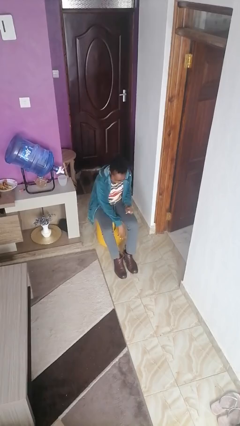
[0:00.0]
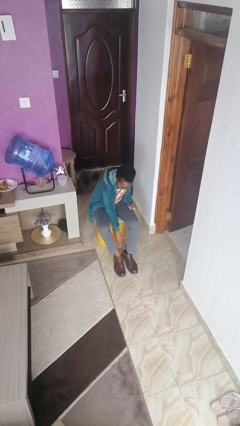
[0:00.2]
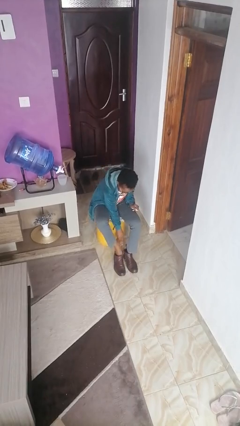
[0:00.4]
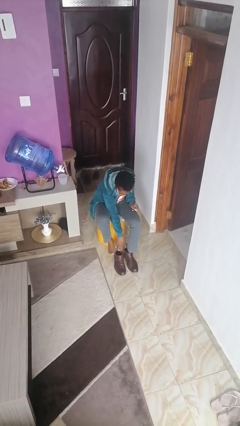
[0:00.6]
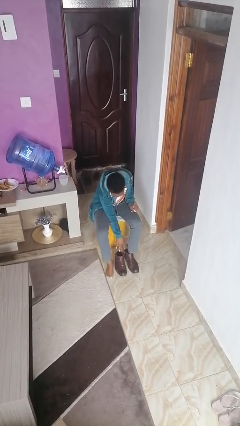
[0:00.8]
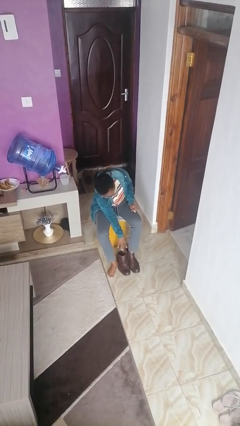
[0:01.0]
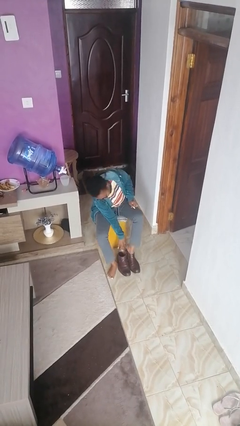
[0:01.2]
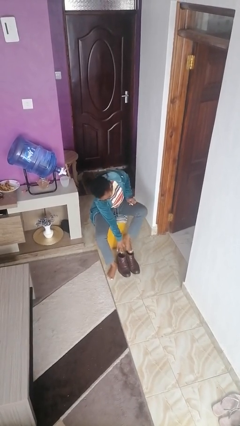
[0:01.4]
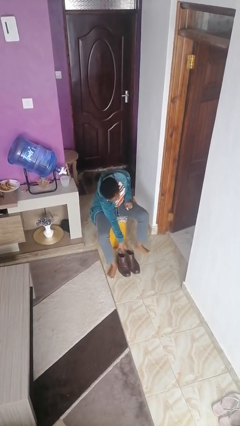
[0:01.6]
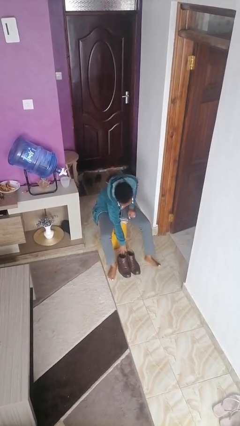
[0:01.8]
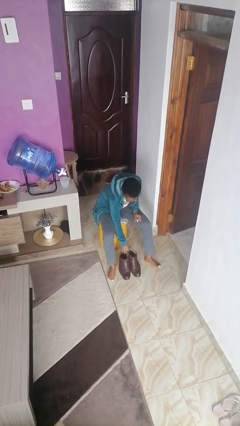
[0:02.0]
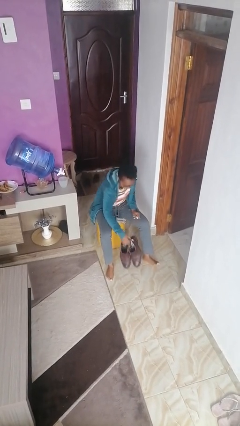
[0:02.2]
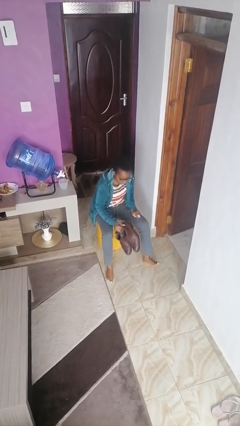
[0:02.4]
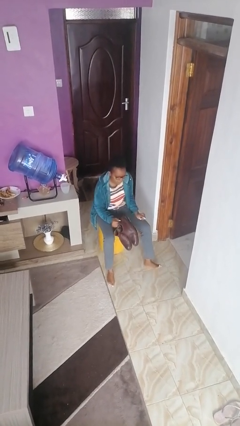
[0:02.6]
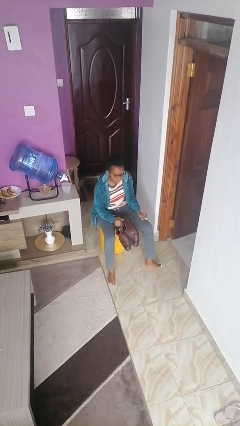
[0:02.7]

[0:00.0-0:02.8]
person takes off boots

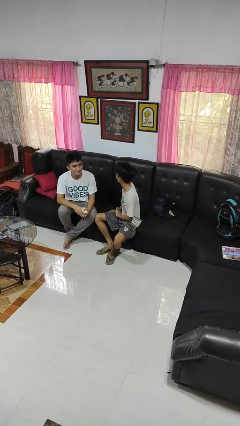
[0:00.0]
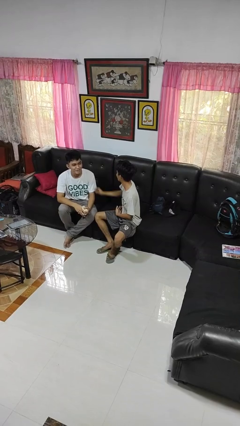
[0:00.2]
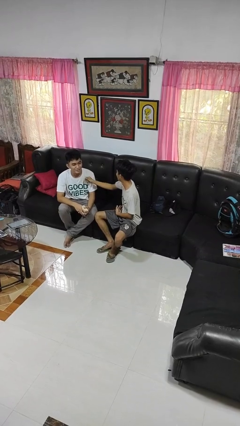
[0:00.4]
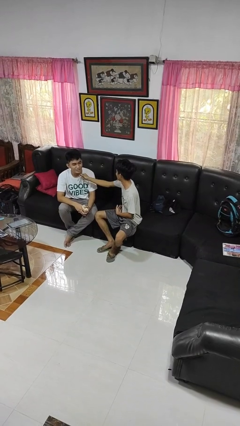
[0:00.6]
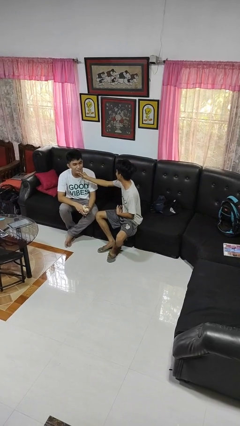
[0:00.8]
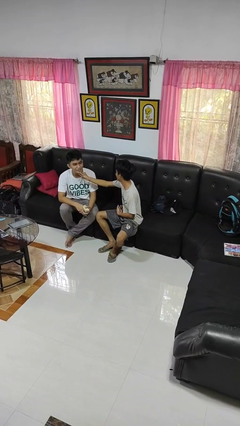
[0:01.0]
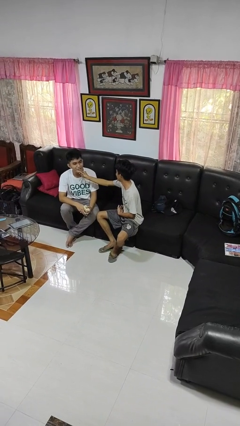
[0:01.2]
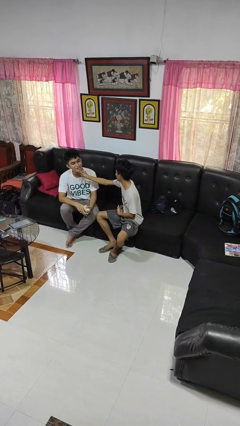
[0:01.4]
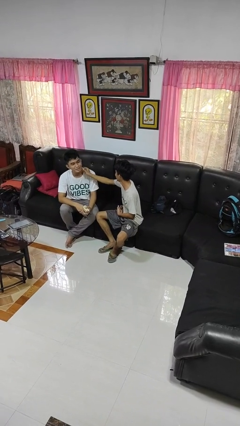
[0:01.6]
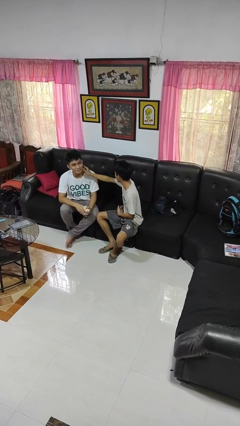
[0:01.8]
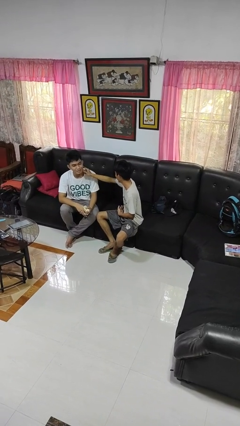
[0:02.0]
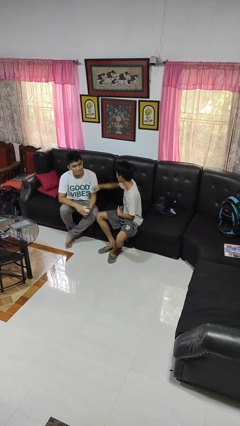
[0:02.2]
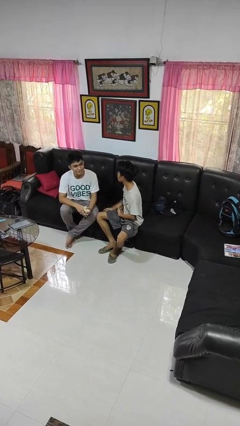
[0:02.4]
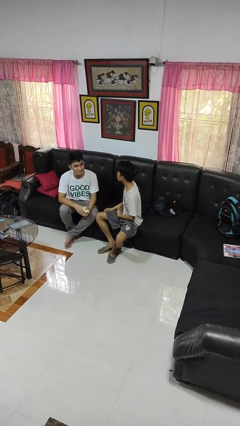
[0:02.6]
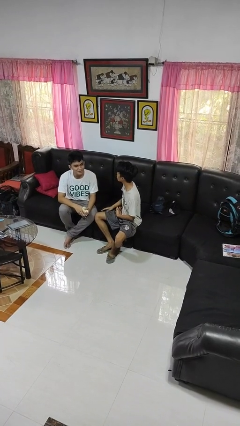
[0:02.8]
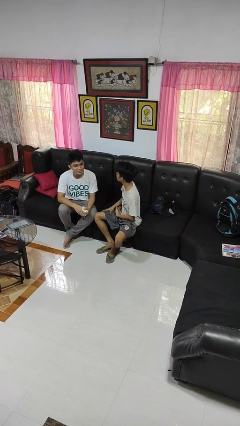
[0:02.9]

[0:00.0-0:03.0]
person touches face of person

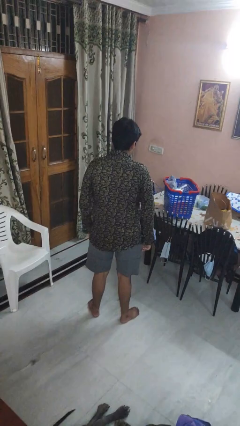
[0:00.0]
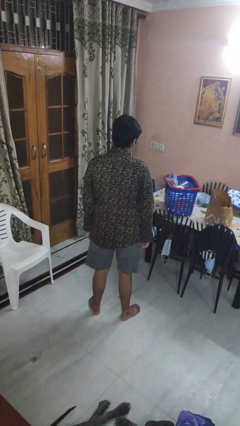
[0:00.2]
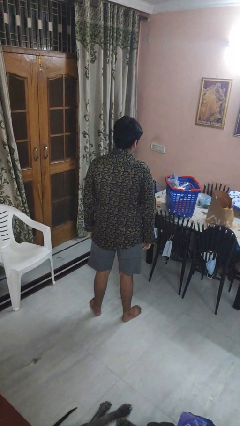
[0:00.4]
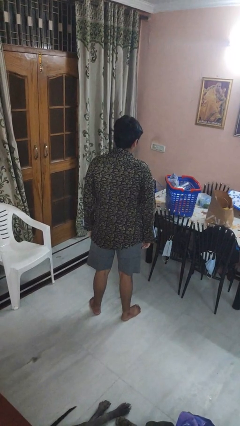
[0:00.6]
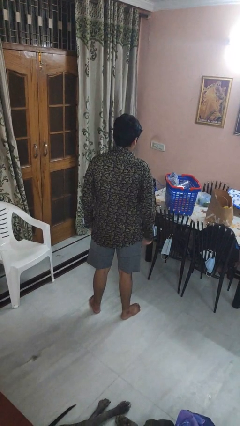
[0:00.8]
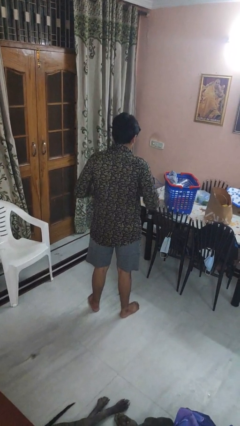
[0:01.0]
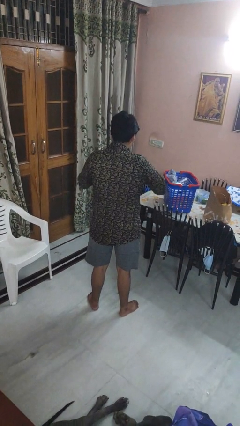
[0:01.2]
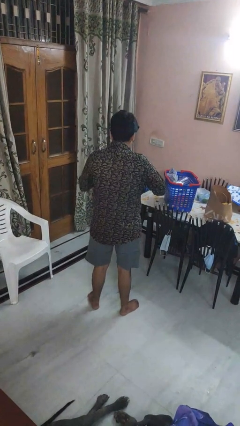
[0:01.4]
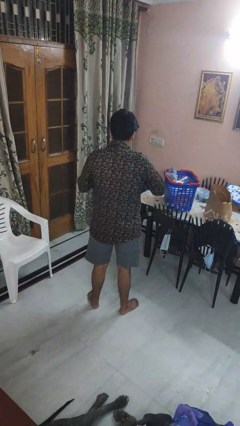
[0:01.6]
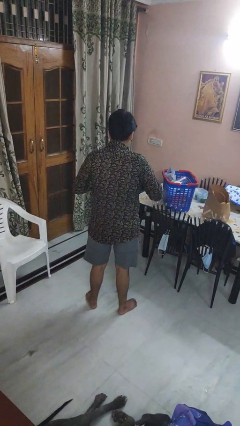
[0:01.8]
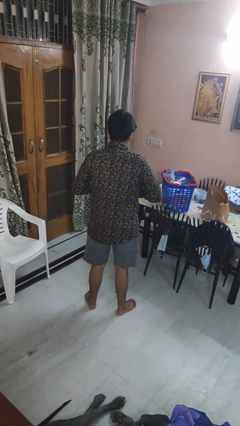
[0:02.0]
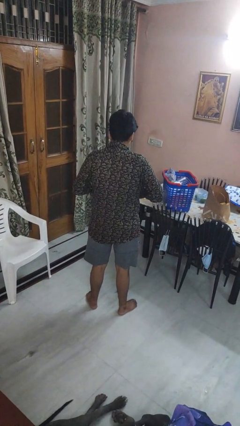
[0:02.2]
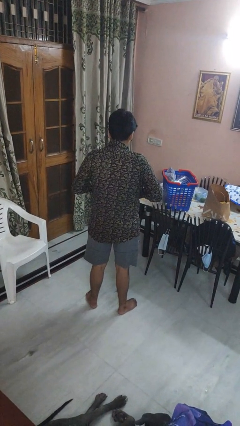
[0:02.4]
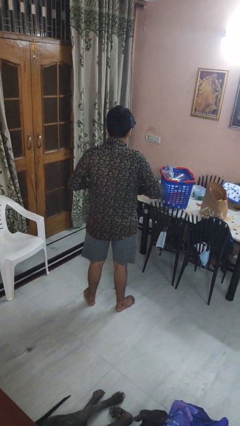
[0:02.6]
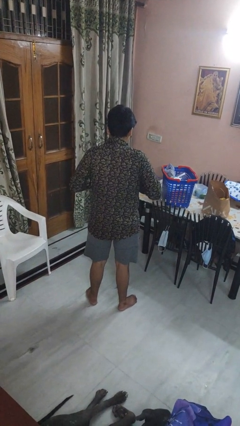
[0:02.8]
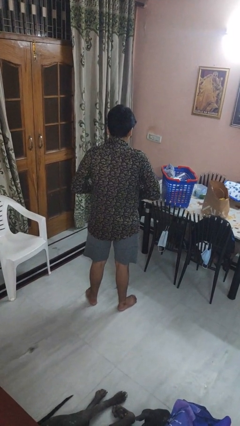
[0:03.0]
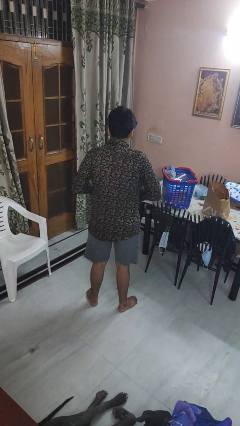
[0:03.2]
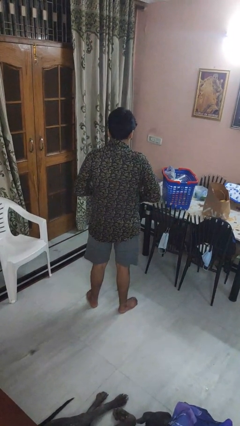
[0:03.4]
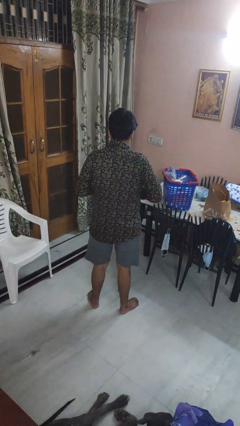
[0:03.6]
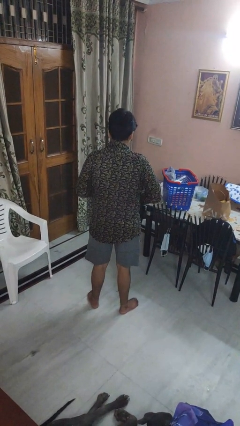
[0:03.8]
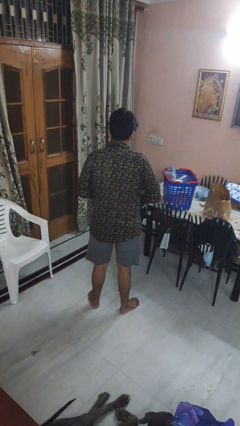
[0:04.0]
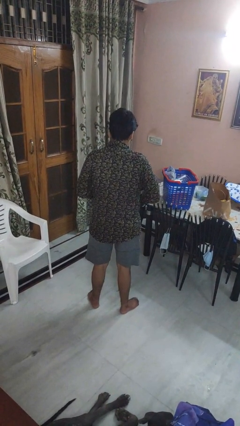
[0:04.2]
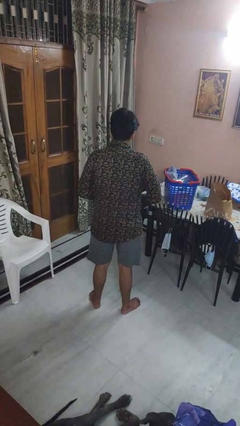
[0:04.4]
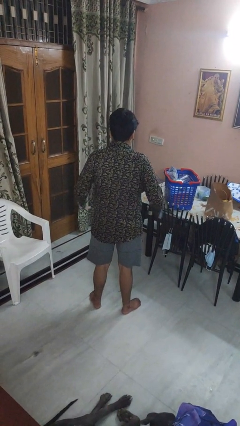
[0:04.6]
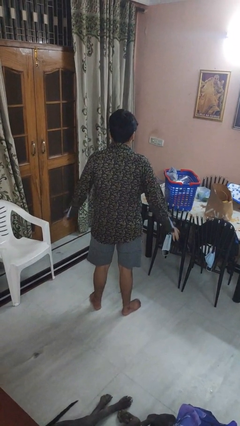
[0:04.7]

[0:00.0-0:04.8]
person buttons shirt

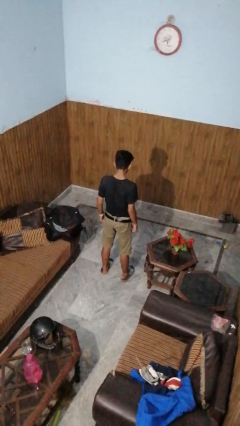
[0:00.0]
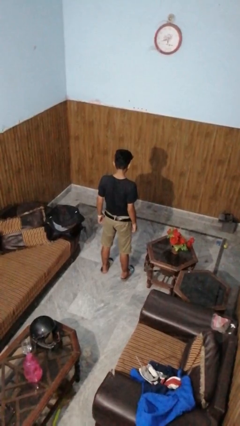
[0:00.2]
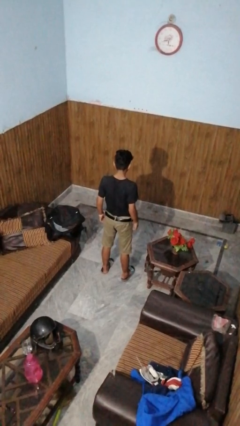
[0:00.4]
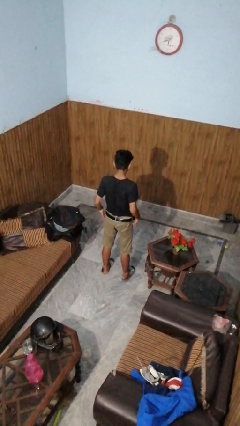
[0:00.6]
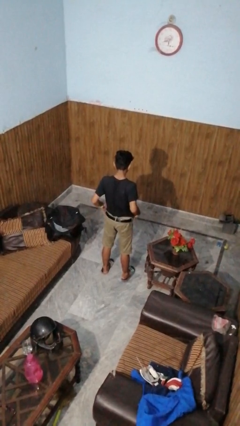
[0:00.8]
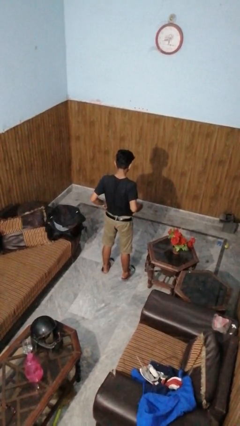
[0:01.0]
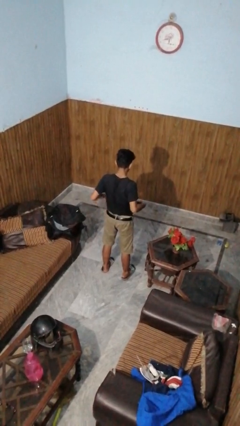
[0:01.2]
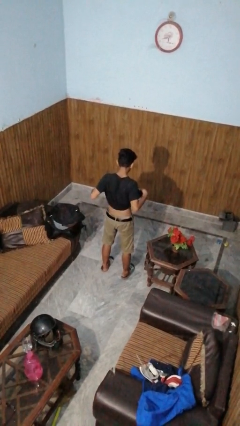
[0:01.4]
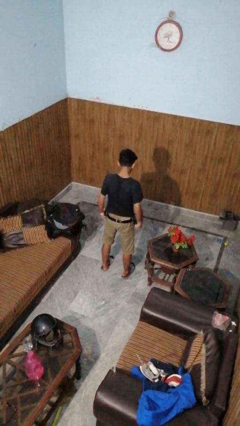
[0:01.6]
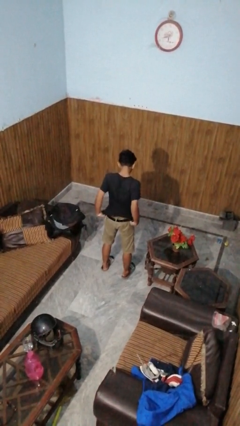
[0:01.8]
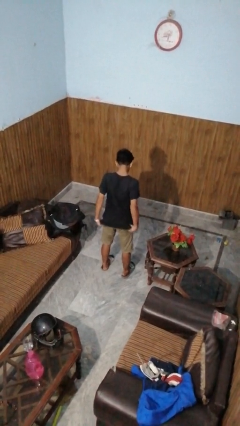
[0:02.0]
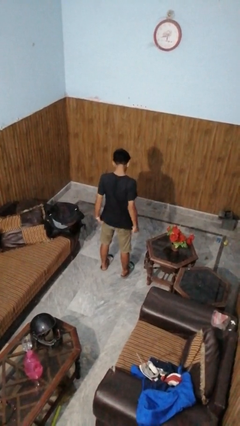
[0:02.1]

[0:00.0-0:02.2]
person untucks shirt

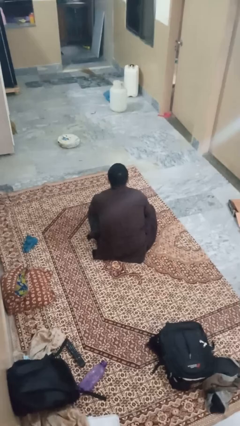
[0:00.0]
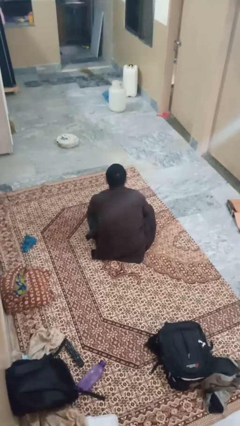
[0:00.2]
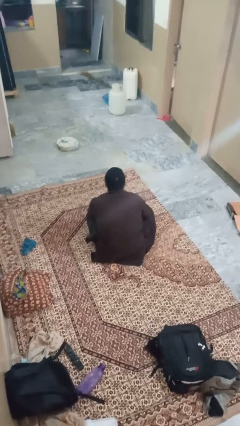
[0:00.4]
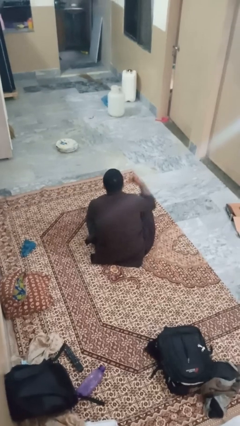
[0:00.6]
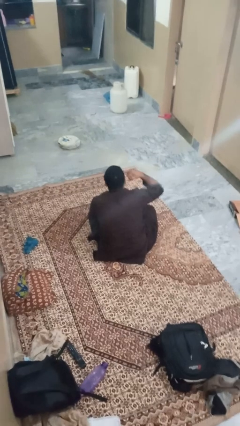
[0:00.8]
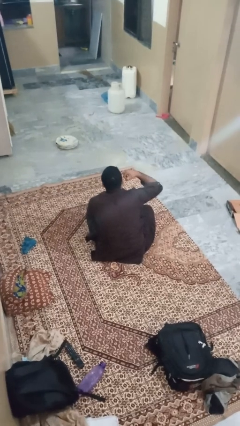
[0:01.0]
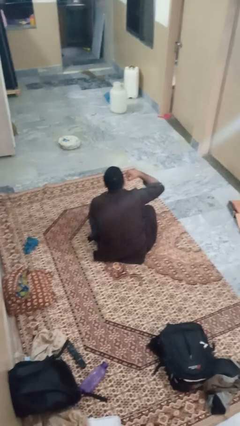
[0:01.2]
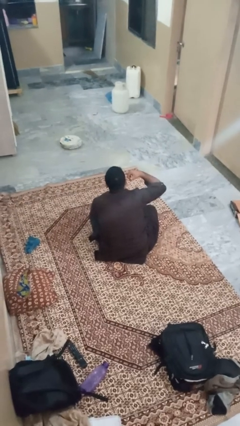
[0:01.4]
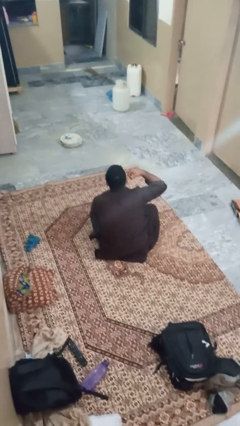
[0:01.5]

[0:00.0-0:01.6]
person gestures call me

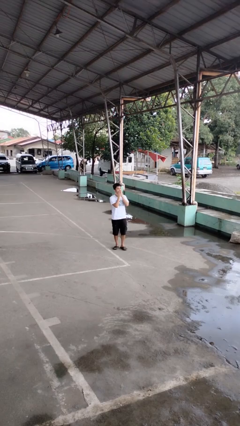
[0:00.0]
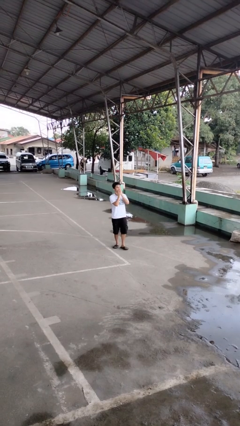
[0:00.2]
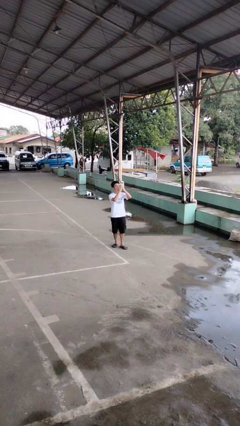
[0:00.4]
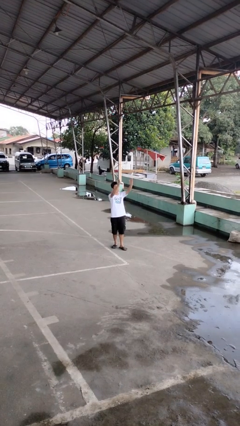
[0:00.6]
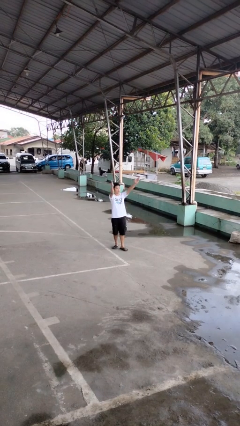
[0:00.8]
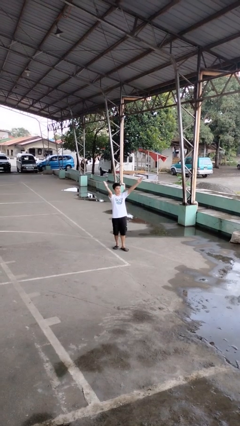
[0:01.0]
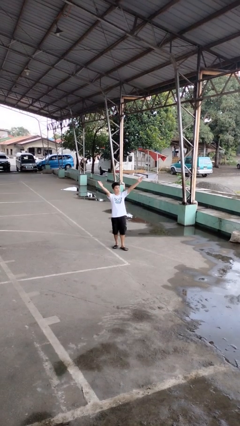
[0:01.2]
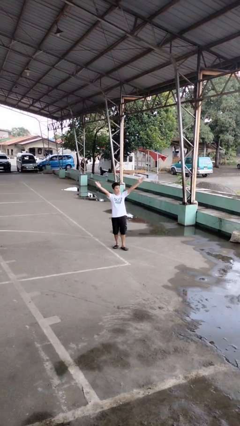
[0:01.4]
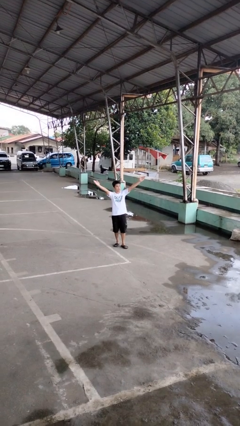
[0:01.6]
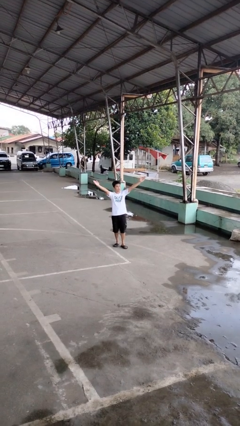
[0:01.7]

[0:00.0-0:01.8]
person gestures blow kiss

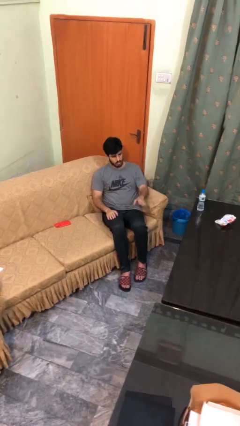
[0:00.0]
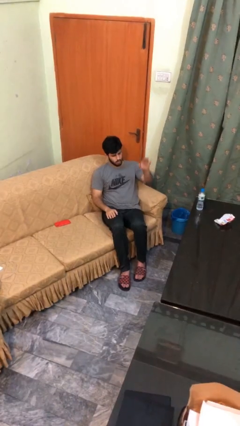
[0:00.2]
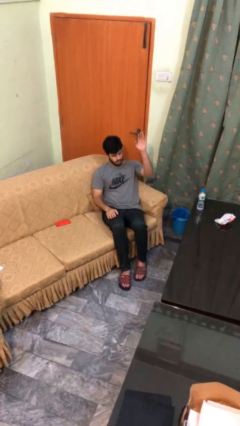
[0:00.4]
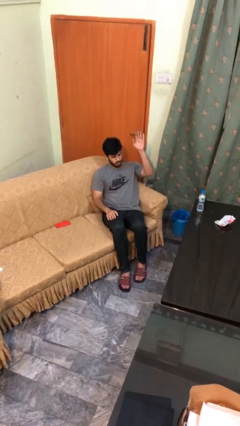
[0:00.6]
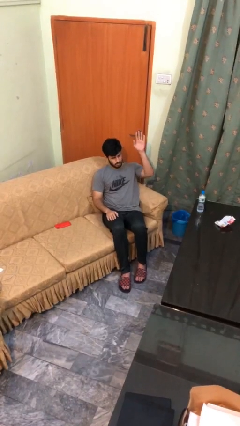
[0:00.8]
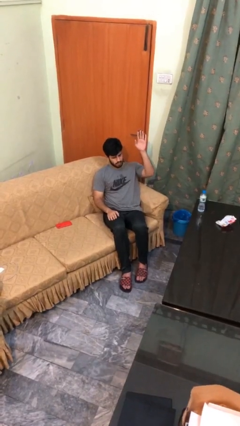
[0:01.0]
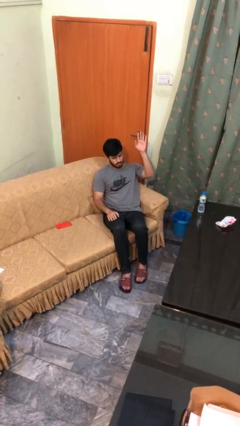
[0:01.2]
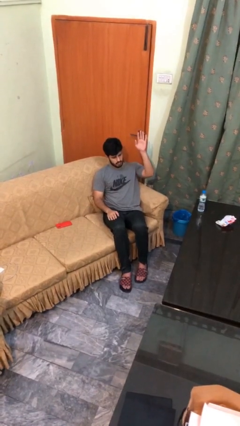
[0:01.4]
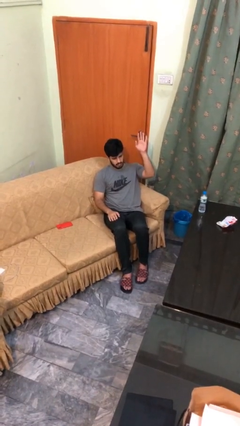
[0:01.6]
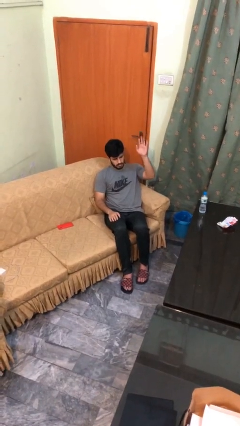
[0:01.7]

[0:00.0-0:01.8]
person gestures raise hand
